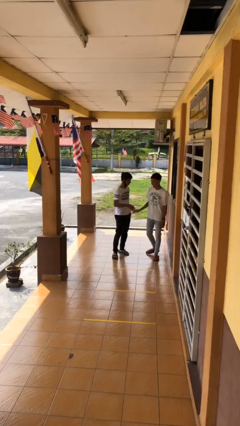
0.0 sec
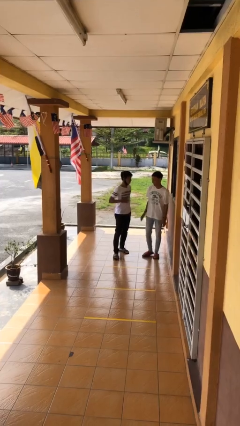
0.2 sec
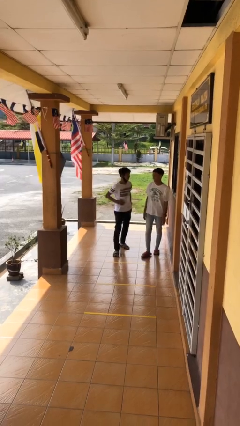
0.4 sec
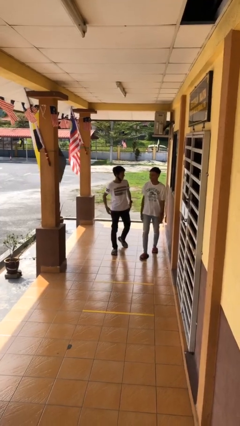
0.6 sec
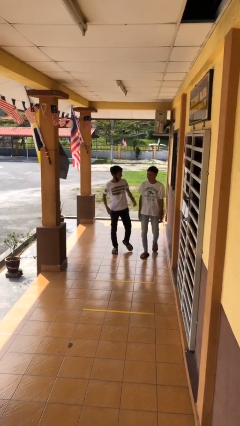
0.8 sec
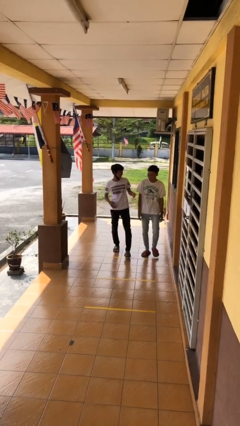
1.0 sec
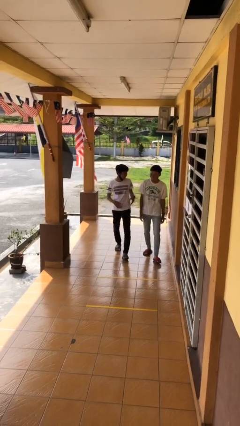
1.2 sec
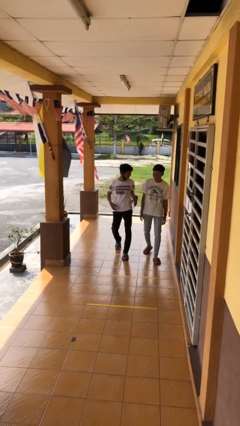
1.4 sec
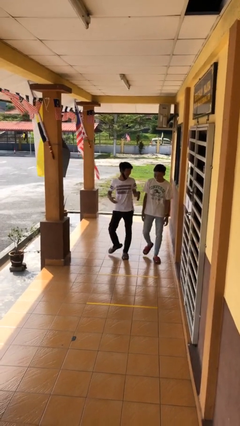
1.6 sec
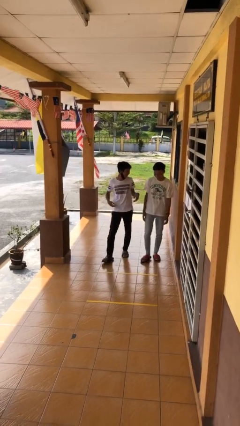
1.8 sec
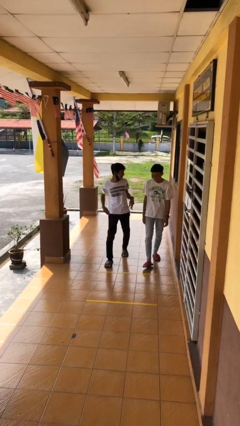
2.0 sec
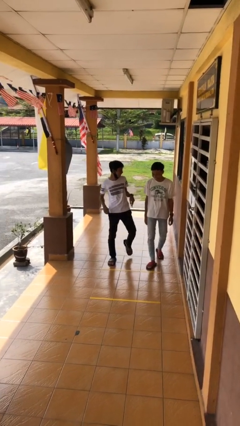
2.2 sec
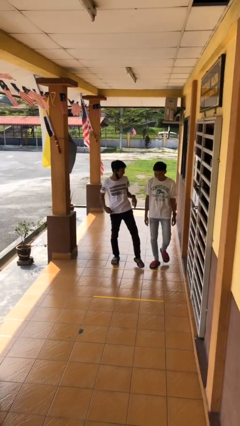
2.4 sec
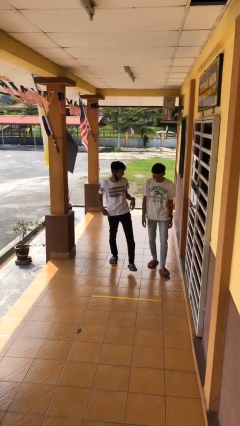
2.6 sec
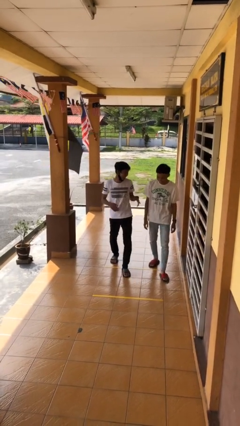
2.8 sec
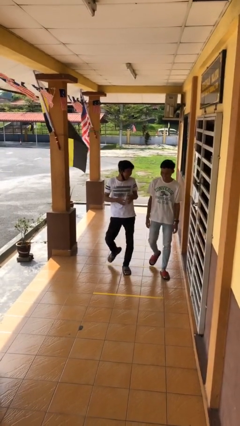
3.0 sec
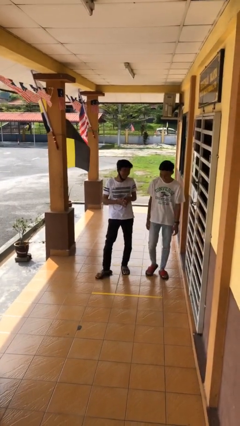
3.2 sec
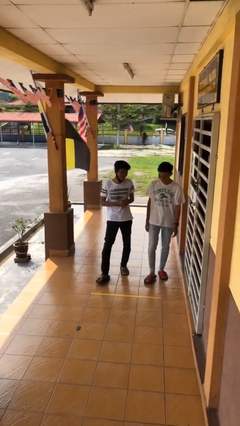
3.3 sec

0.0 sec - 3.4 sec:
person talks to person

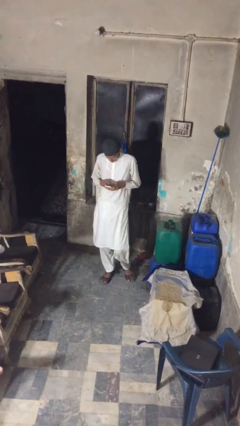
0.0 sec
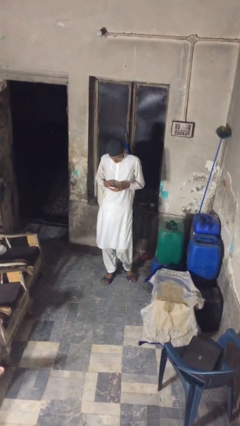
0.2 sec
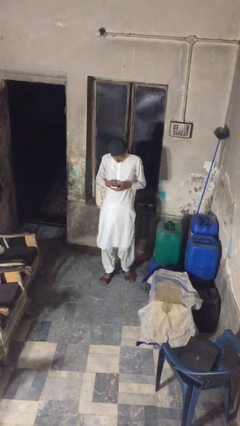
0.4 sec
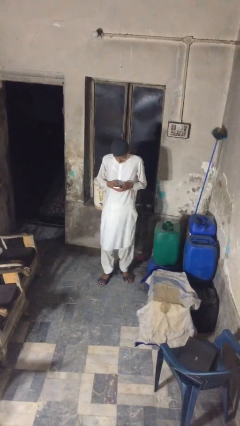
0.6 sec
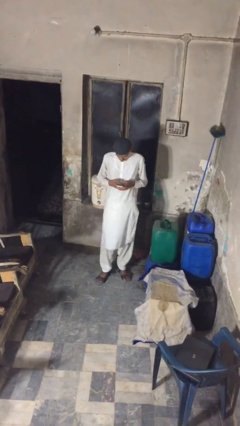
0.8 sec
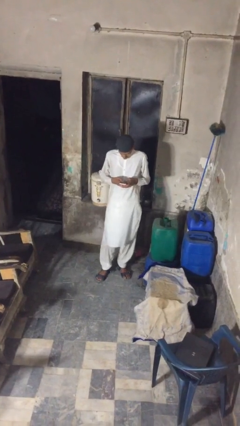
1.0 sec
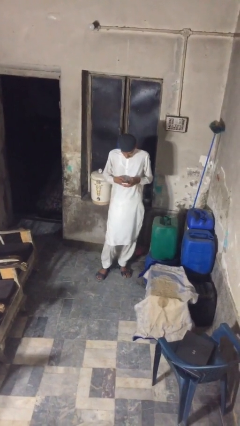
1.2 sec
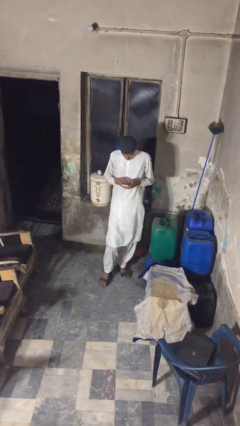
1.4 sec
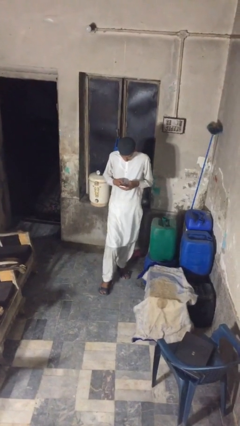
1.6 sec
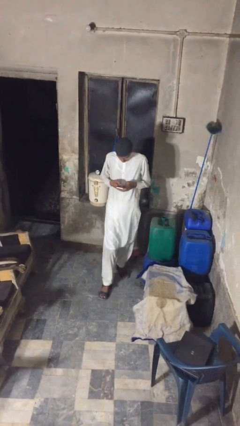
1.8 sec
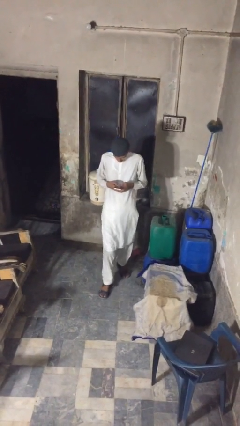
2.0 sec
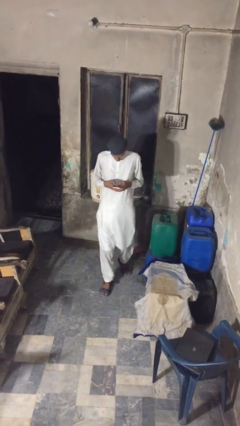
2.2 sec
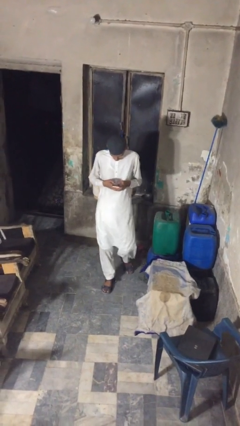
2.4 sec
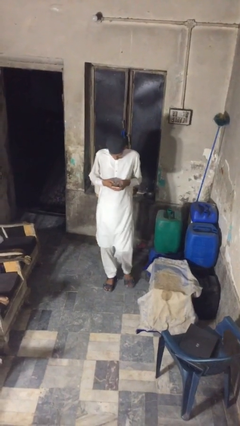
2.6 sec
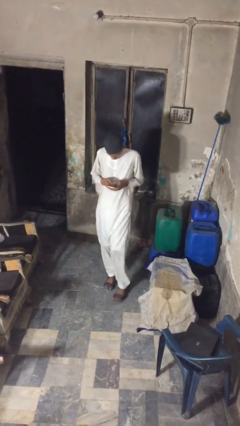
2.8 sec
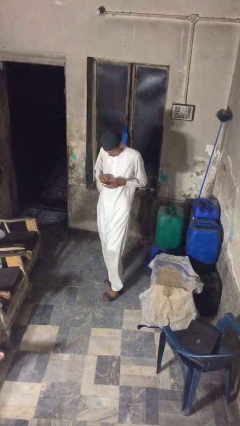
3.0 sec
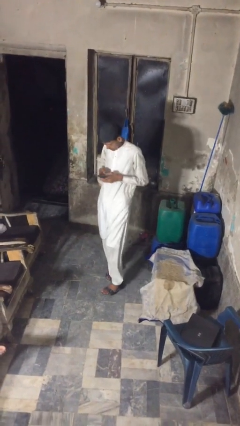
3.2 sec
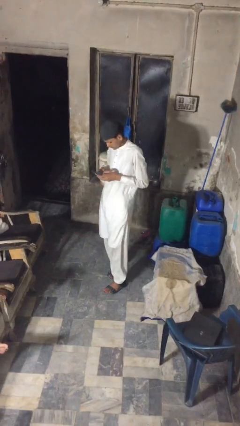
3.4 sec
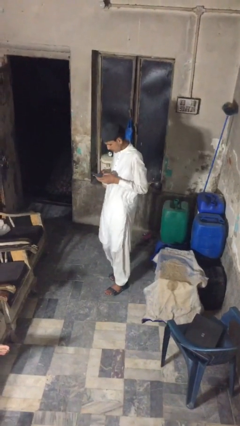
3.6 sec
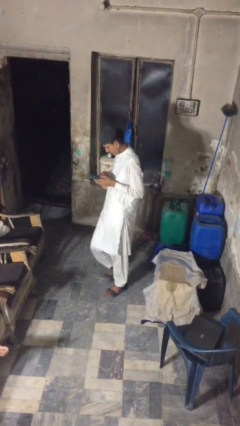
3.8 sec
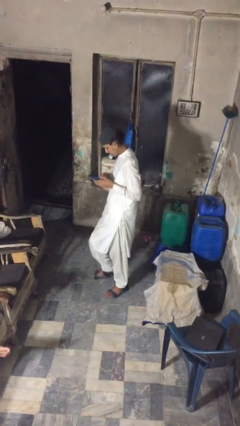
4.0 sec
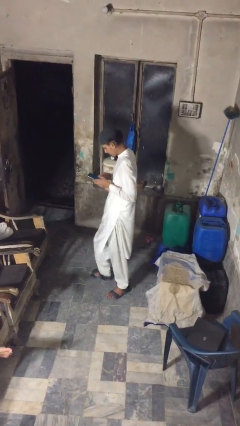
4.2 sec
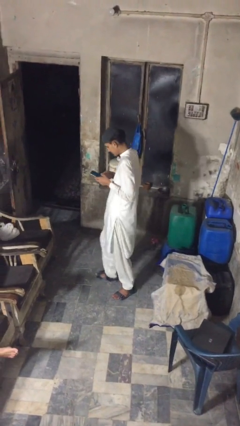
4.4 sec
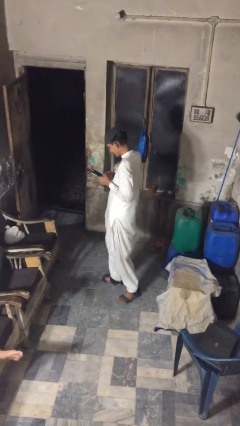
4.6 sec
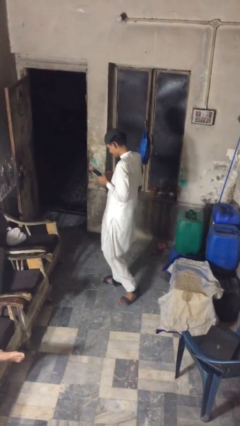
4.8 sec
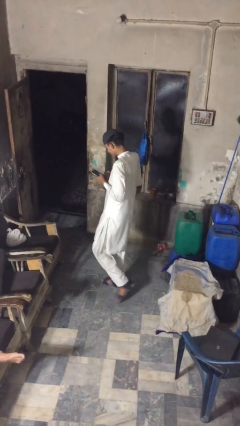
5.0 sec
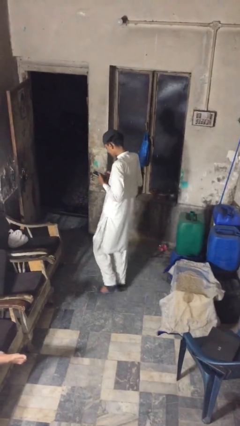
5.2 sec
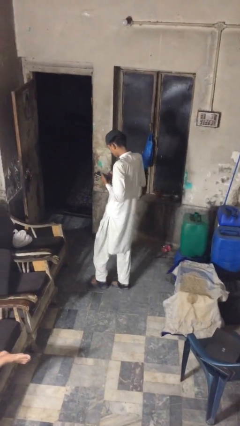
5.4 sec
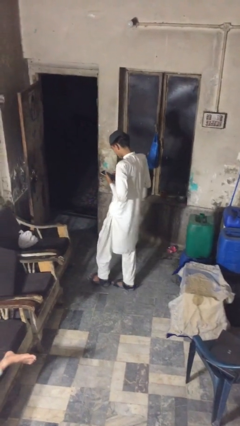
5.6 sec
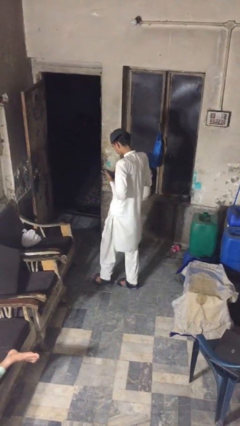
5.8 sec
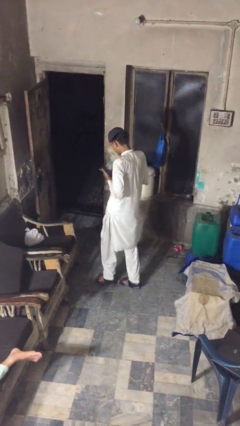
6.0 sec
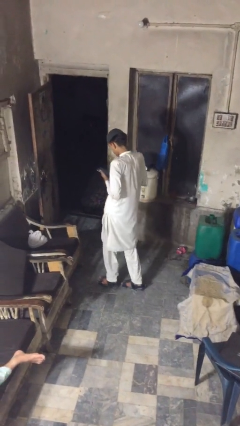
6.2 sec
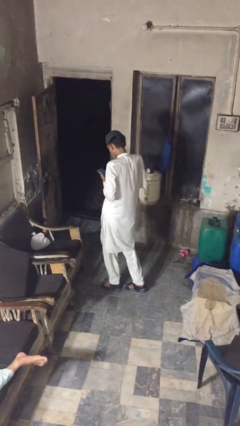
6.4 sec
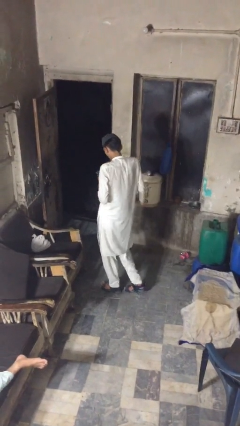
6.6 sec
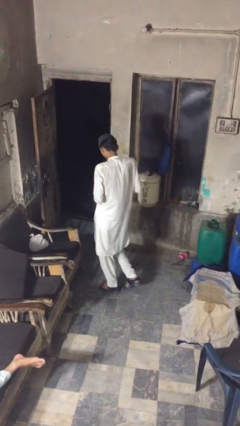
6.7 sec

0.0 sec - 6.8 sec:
person texts on phone

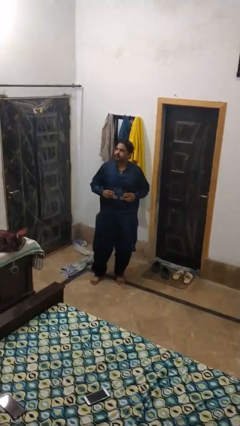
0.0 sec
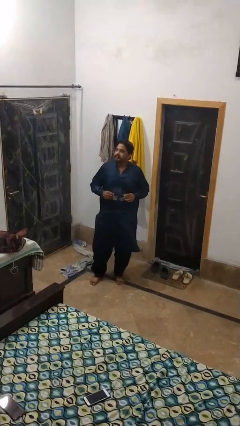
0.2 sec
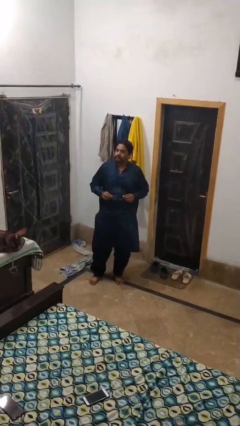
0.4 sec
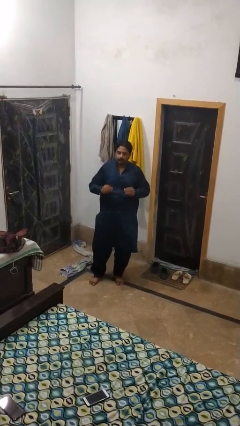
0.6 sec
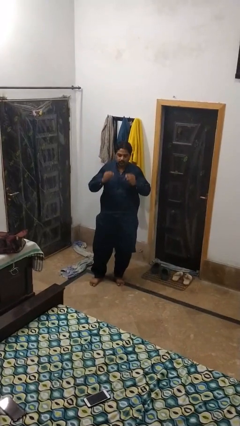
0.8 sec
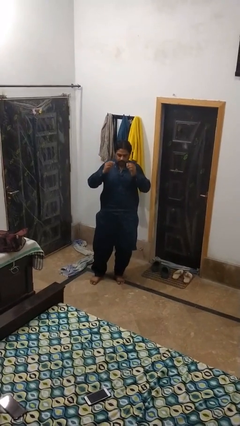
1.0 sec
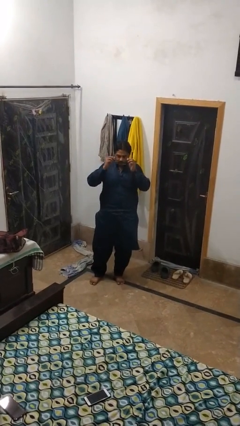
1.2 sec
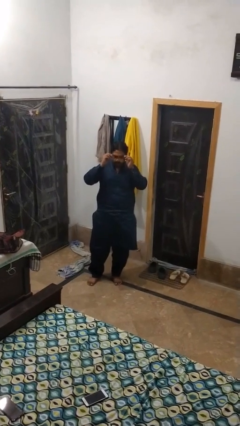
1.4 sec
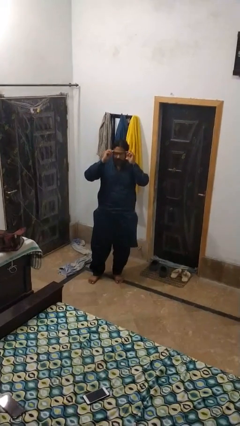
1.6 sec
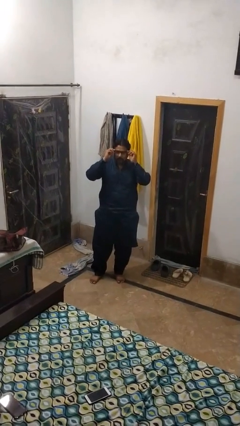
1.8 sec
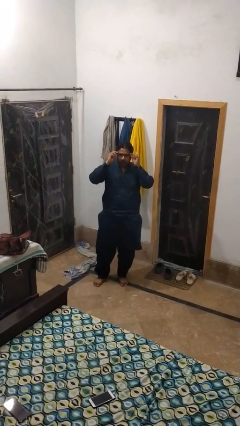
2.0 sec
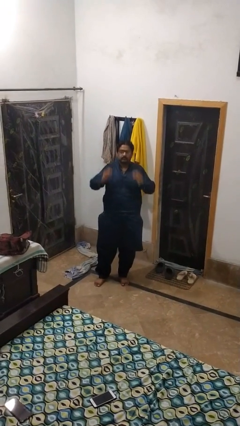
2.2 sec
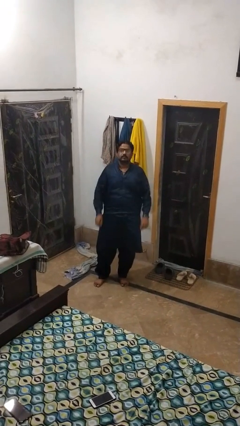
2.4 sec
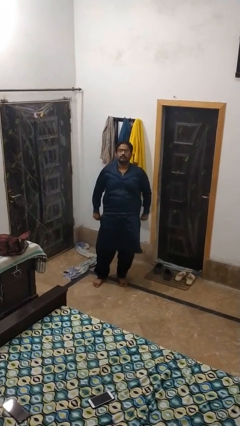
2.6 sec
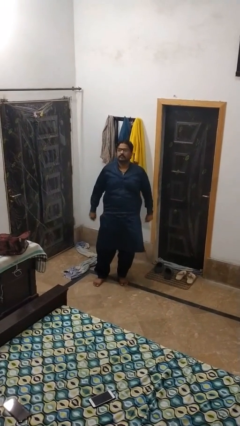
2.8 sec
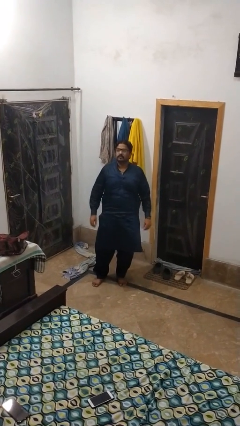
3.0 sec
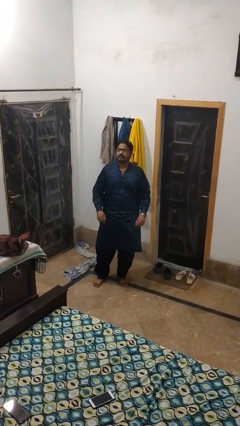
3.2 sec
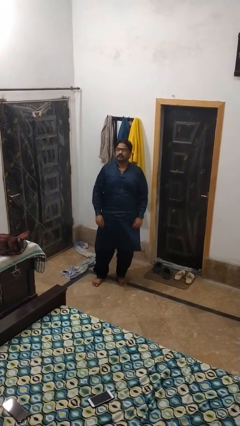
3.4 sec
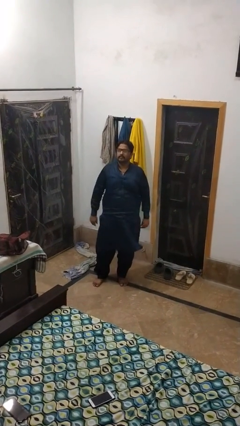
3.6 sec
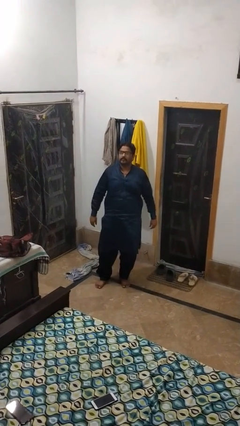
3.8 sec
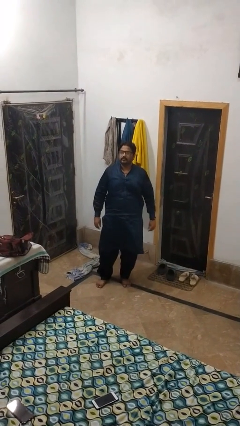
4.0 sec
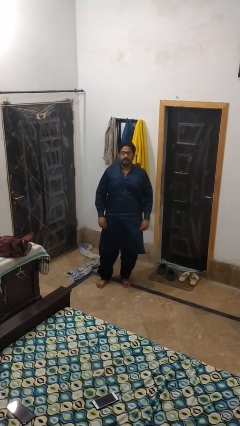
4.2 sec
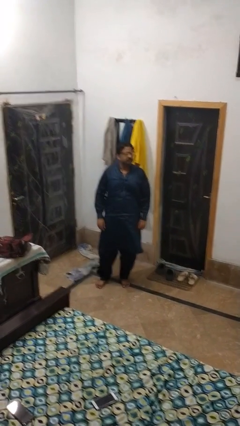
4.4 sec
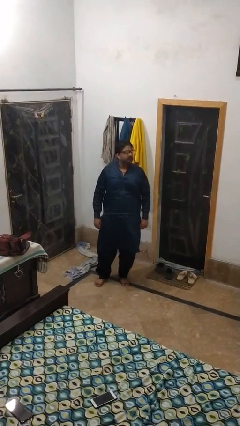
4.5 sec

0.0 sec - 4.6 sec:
person puts on glasses

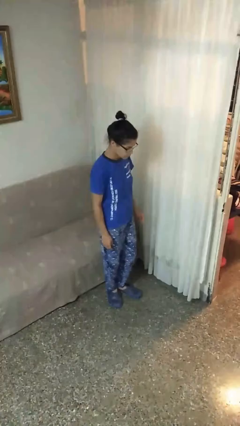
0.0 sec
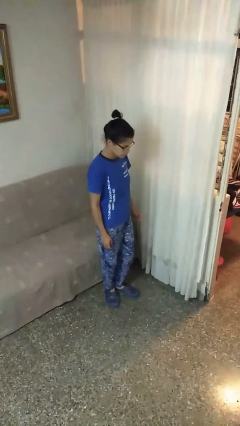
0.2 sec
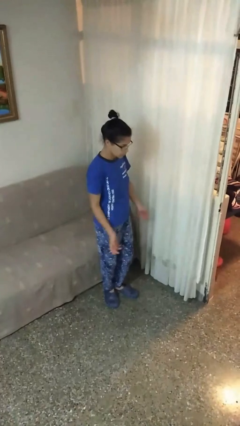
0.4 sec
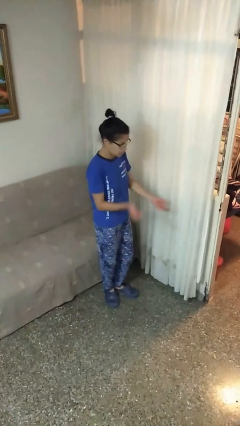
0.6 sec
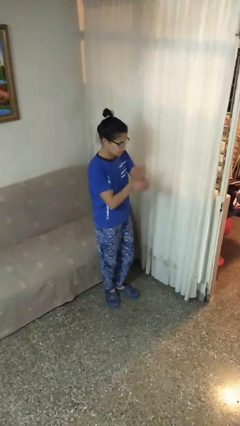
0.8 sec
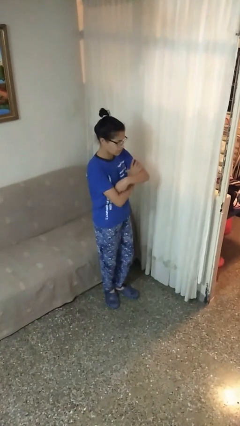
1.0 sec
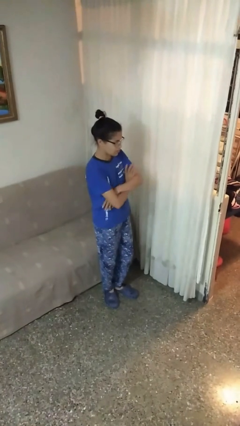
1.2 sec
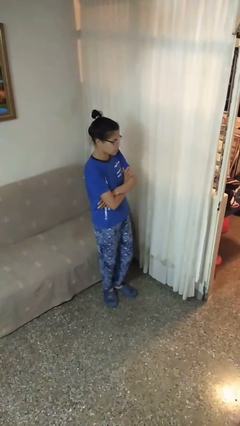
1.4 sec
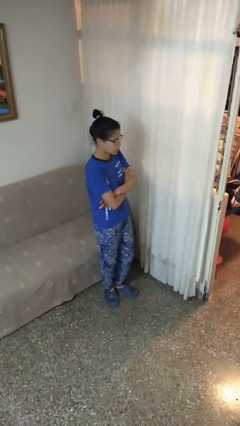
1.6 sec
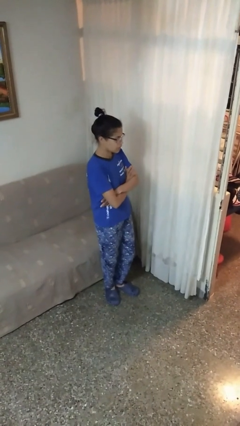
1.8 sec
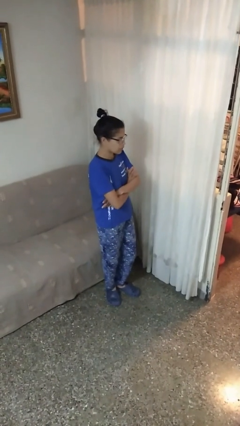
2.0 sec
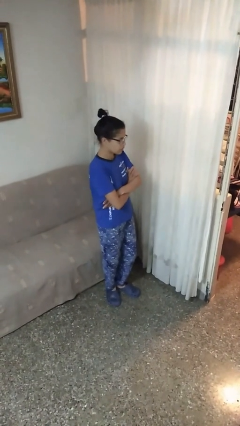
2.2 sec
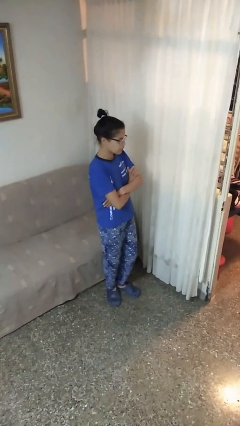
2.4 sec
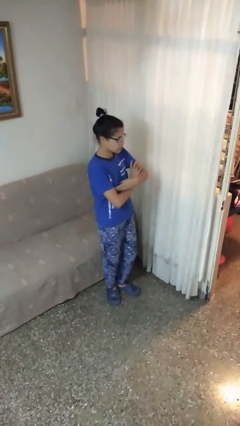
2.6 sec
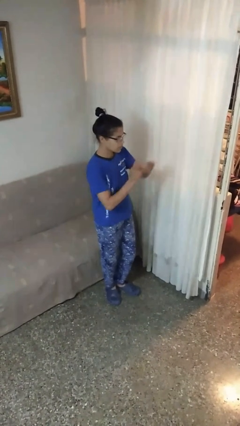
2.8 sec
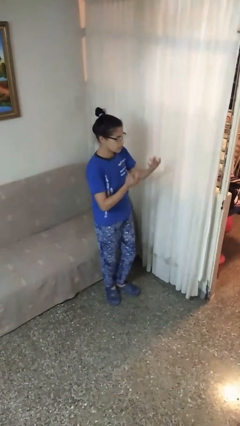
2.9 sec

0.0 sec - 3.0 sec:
person crosses arms

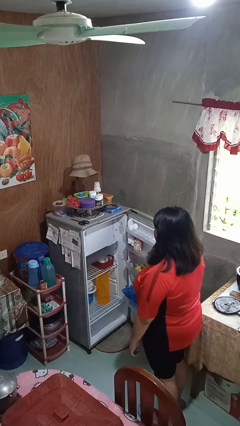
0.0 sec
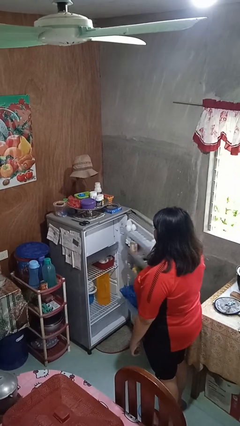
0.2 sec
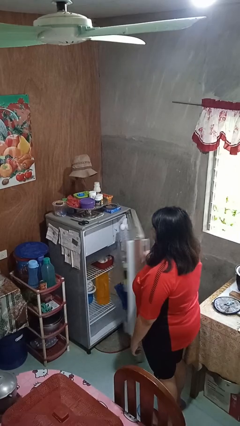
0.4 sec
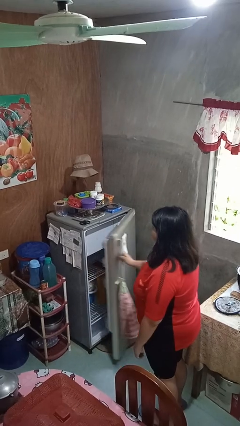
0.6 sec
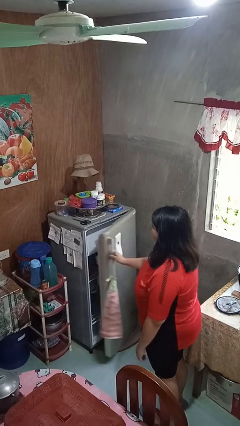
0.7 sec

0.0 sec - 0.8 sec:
person closes refrigerator
